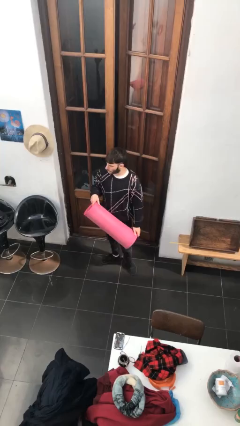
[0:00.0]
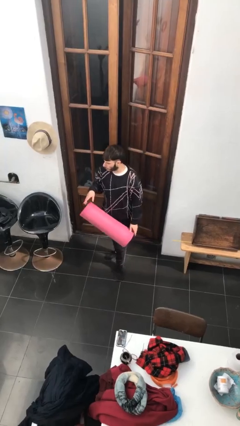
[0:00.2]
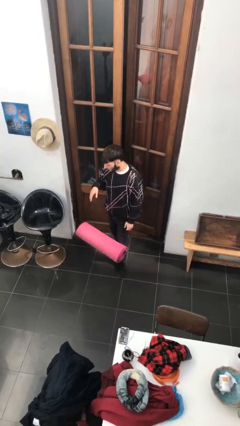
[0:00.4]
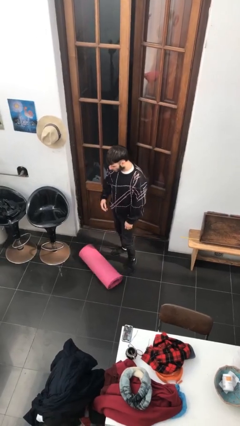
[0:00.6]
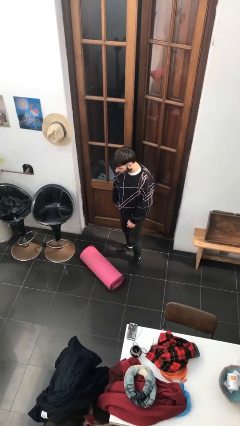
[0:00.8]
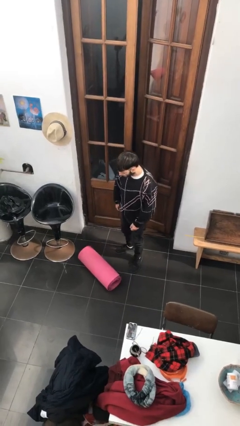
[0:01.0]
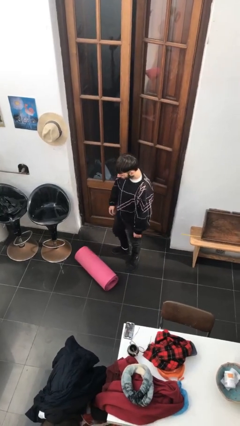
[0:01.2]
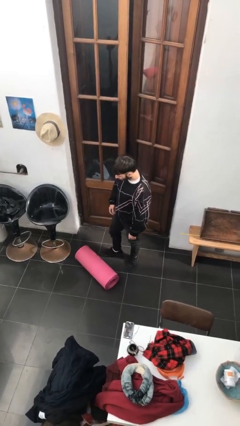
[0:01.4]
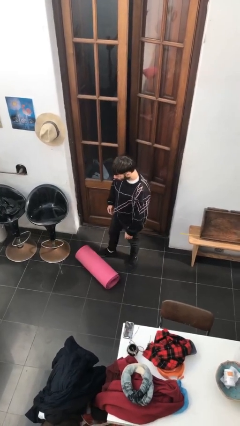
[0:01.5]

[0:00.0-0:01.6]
person drops object

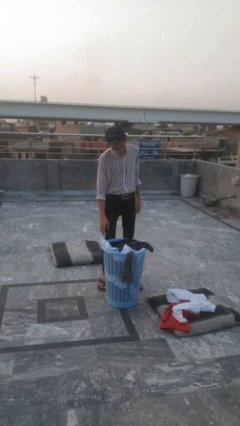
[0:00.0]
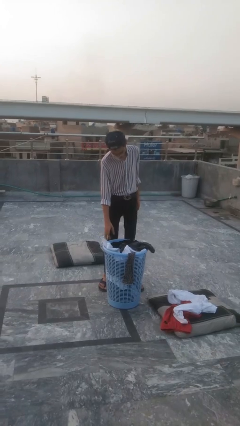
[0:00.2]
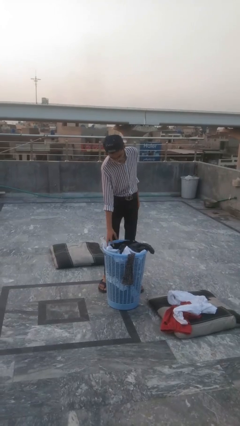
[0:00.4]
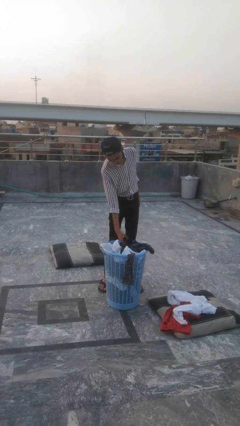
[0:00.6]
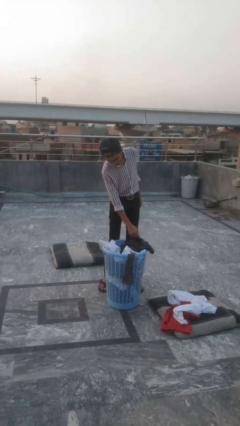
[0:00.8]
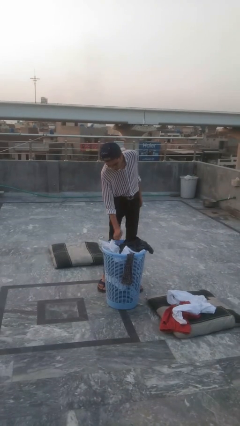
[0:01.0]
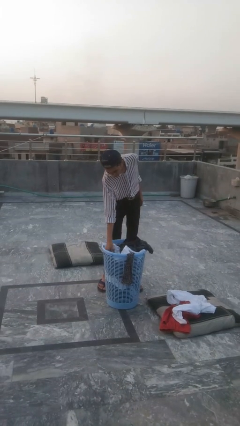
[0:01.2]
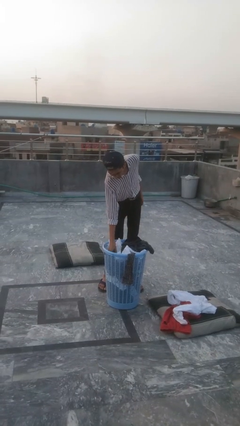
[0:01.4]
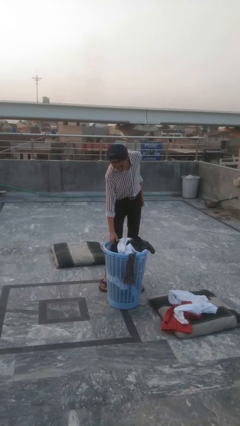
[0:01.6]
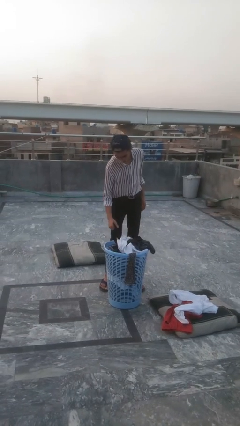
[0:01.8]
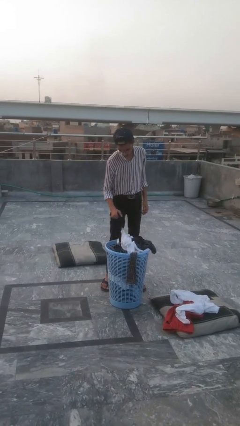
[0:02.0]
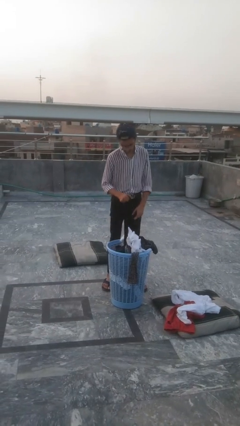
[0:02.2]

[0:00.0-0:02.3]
person puts object into basket

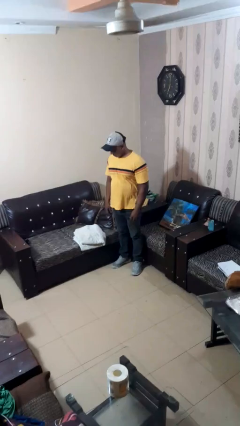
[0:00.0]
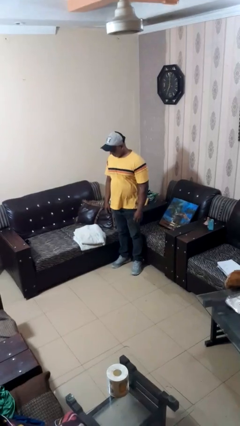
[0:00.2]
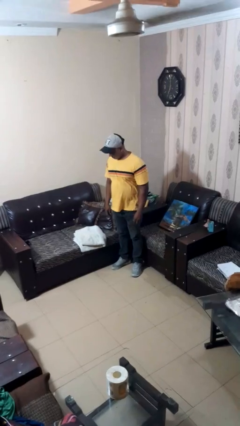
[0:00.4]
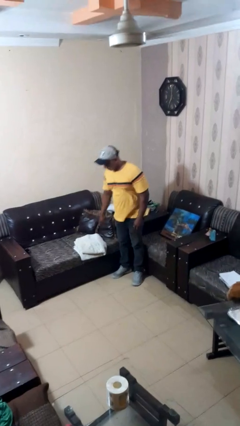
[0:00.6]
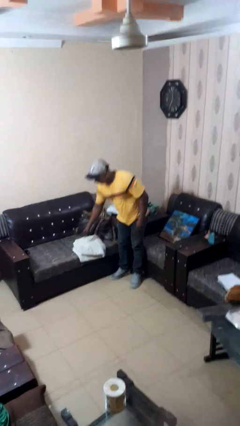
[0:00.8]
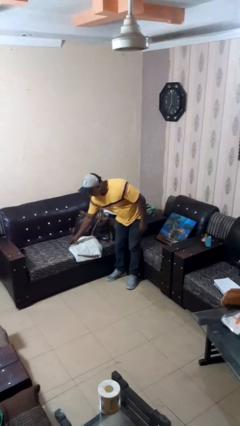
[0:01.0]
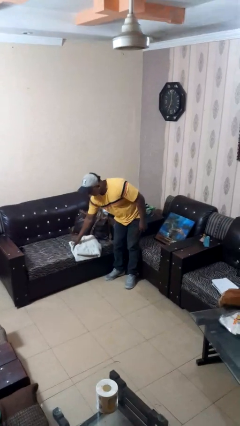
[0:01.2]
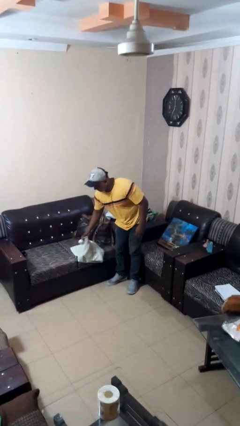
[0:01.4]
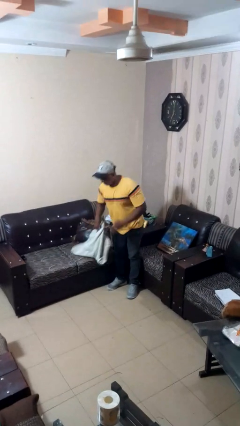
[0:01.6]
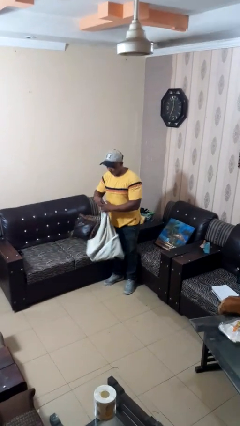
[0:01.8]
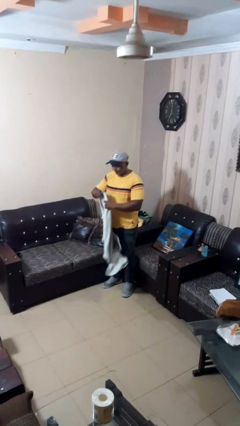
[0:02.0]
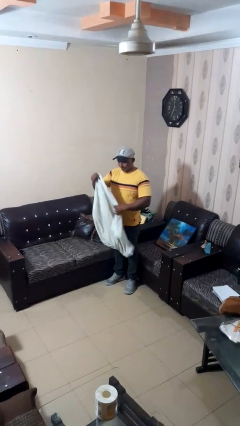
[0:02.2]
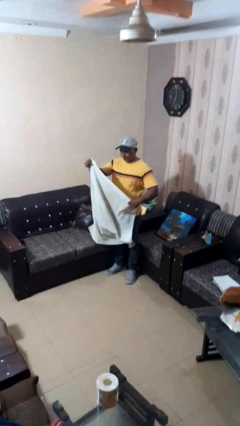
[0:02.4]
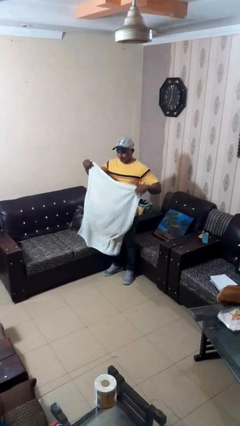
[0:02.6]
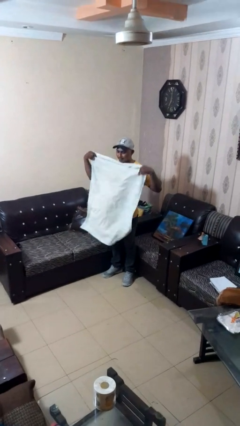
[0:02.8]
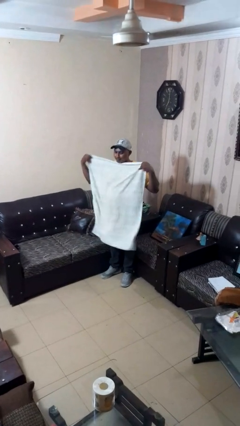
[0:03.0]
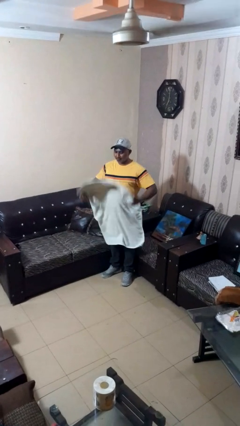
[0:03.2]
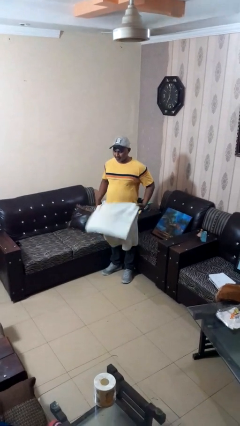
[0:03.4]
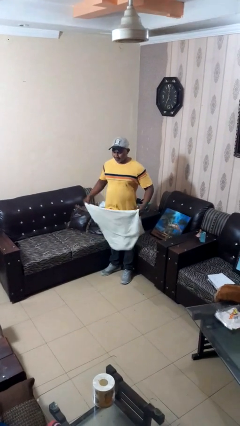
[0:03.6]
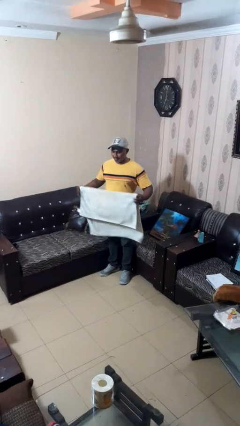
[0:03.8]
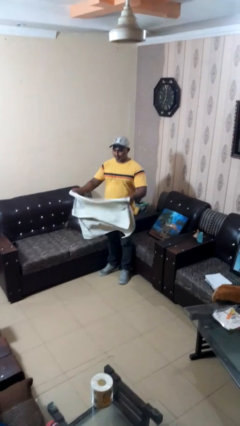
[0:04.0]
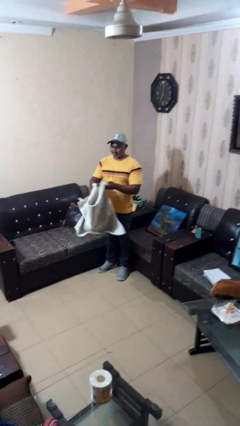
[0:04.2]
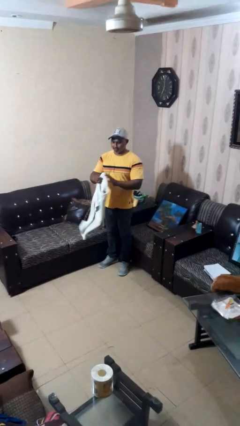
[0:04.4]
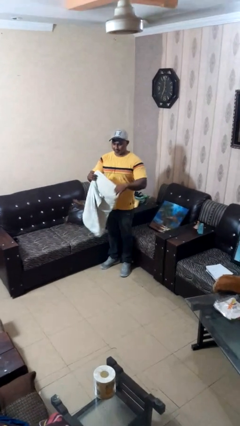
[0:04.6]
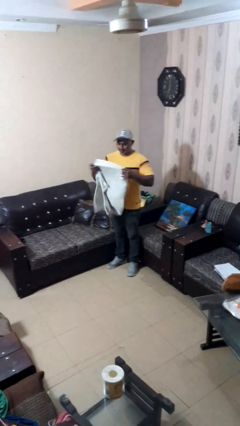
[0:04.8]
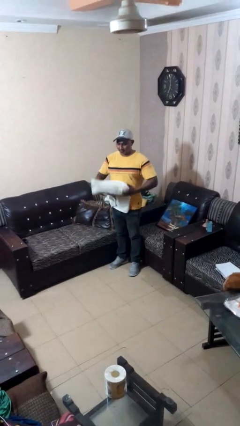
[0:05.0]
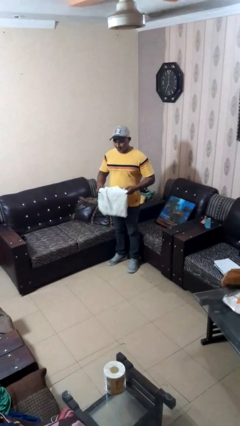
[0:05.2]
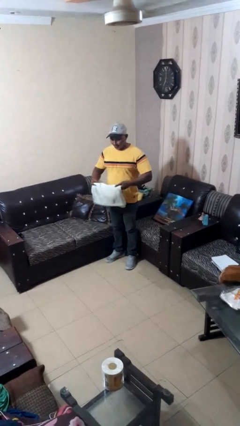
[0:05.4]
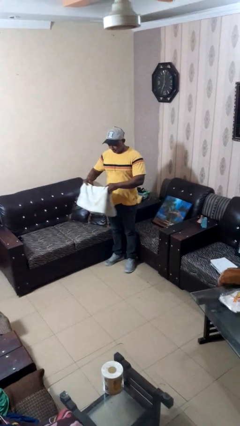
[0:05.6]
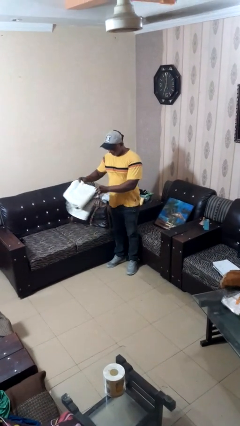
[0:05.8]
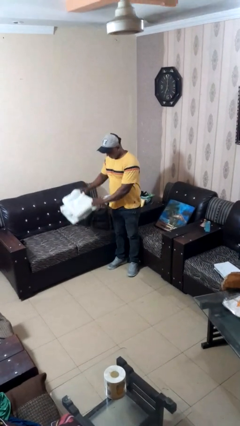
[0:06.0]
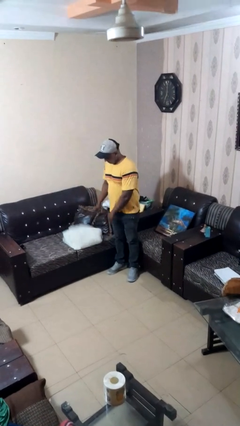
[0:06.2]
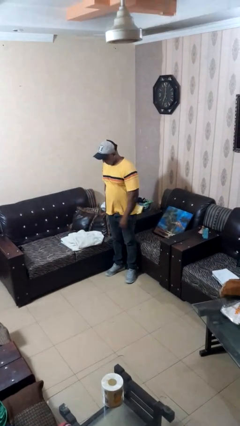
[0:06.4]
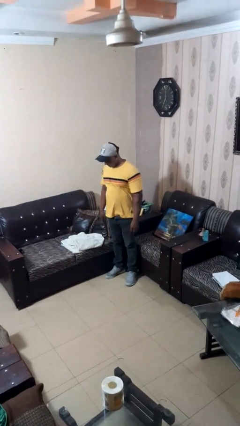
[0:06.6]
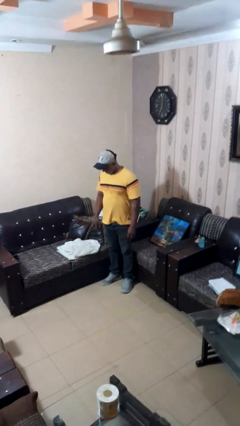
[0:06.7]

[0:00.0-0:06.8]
person folds towel

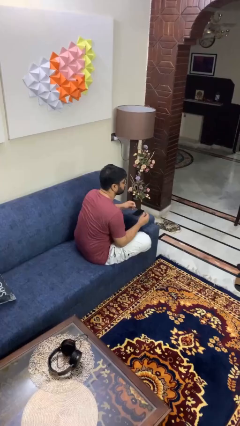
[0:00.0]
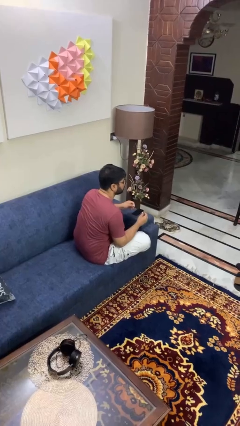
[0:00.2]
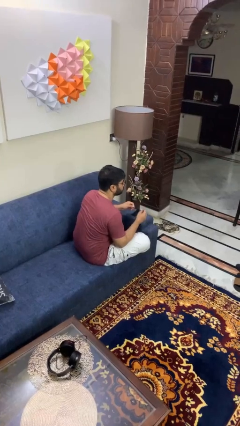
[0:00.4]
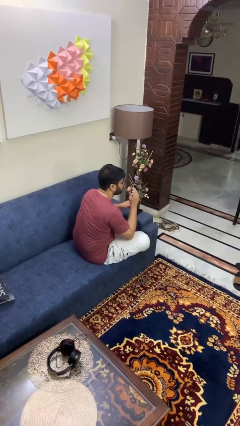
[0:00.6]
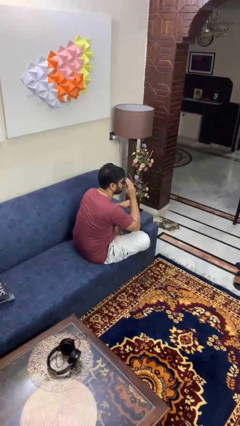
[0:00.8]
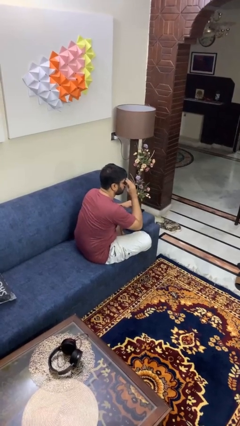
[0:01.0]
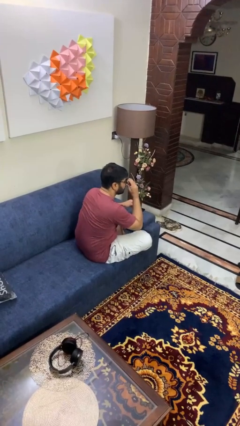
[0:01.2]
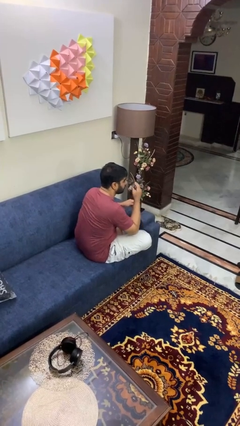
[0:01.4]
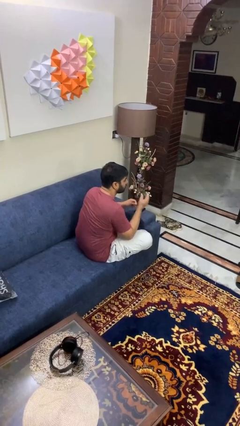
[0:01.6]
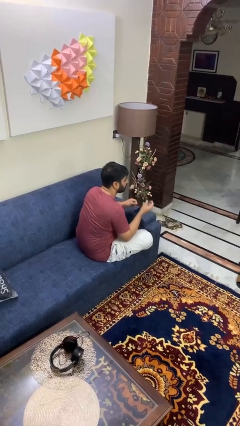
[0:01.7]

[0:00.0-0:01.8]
person takes off glasses

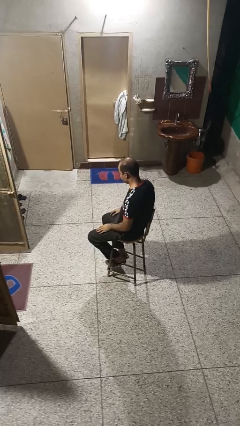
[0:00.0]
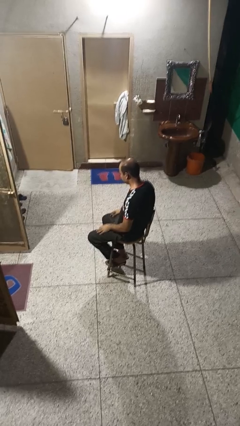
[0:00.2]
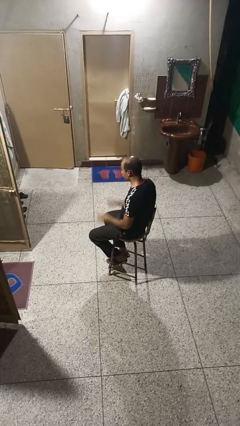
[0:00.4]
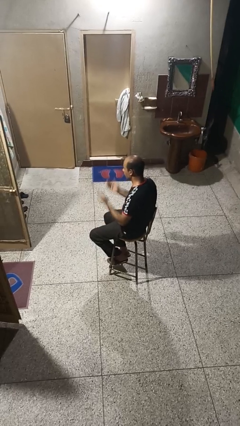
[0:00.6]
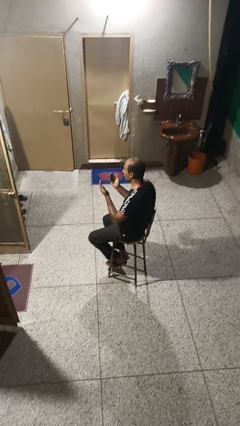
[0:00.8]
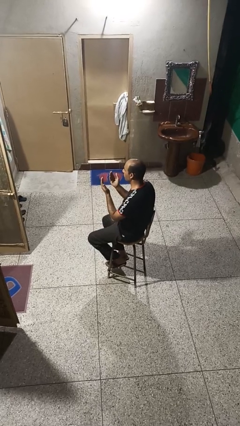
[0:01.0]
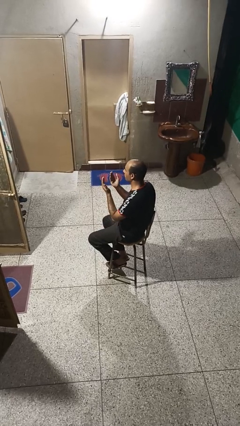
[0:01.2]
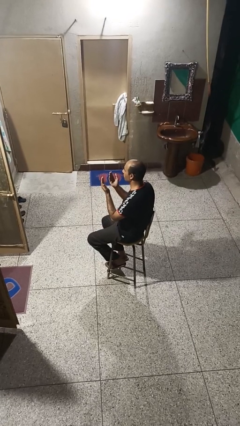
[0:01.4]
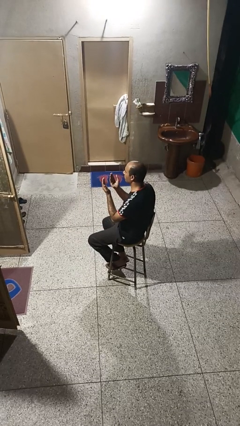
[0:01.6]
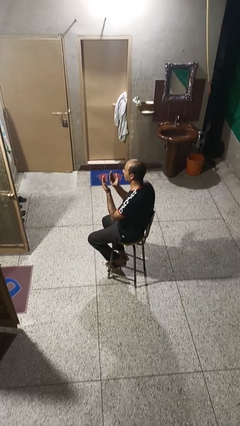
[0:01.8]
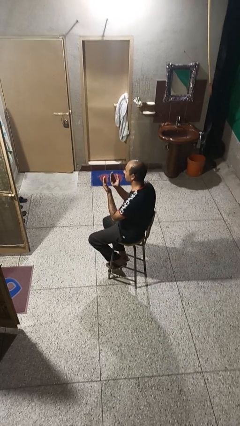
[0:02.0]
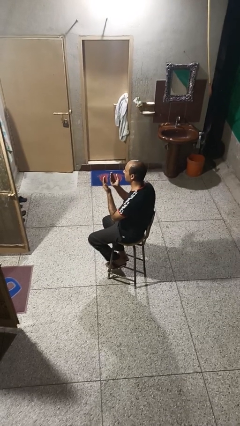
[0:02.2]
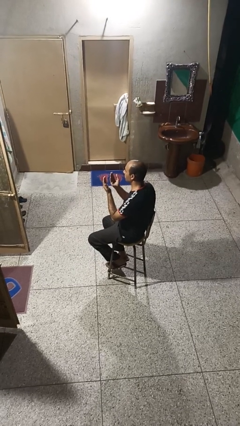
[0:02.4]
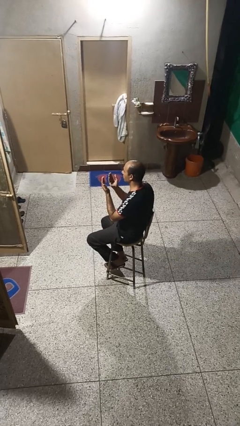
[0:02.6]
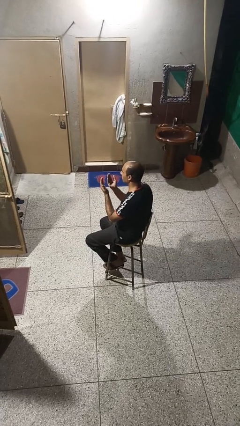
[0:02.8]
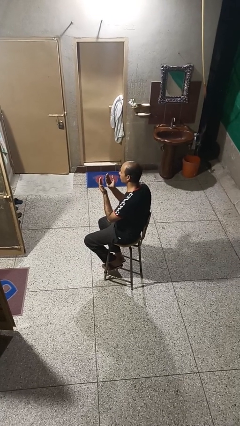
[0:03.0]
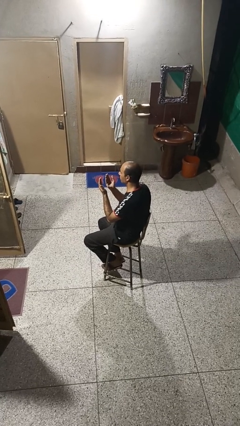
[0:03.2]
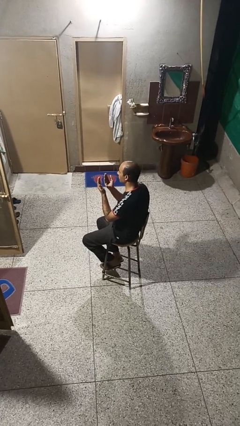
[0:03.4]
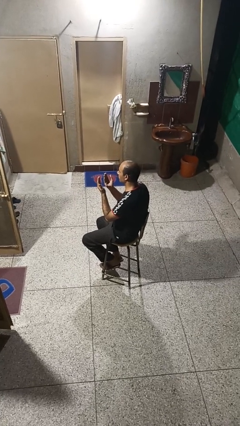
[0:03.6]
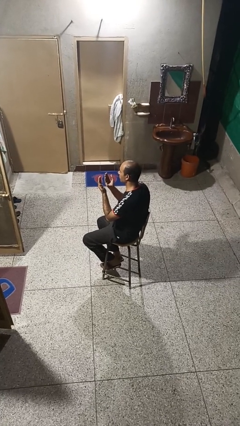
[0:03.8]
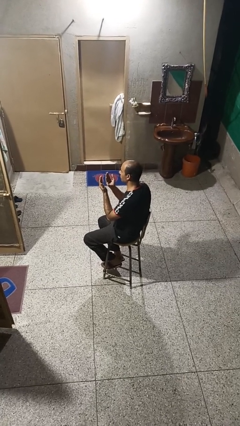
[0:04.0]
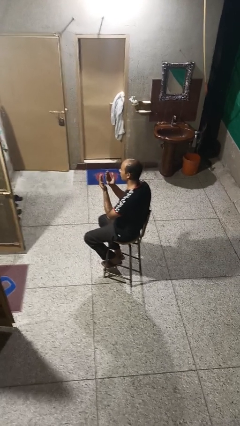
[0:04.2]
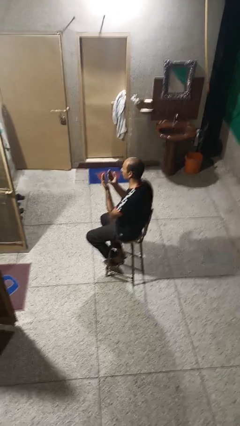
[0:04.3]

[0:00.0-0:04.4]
person prays

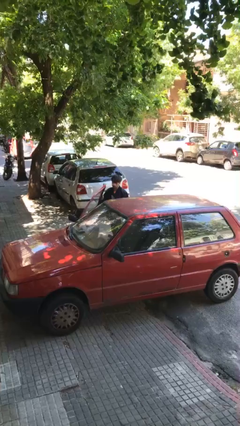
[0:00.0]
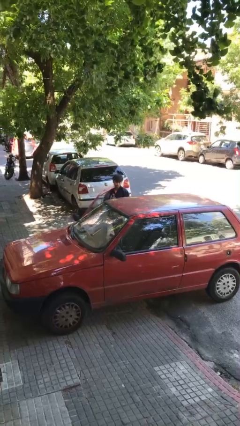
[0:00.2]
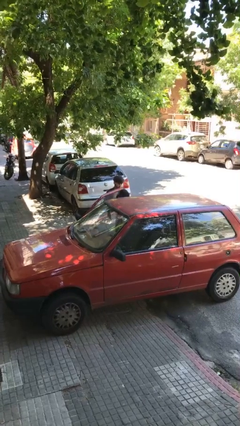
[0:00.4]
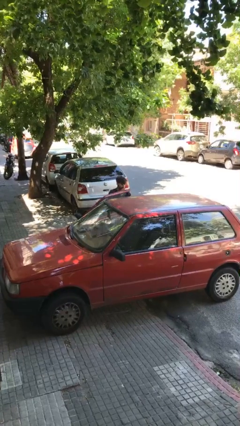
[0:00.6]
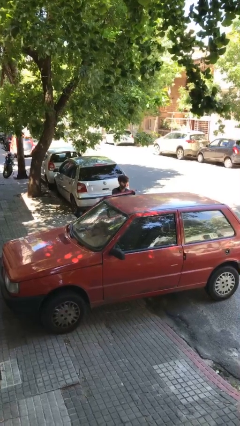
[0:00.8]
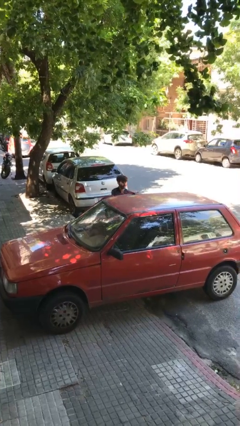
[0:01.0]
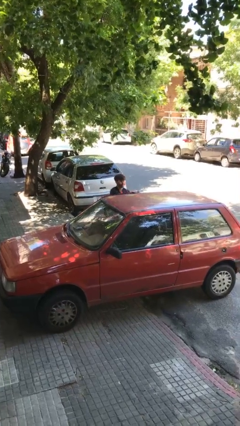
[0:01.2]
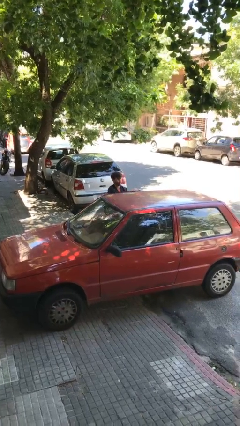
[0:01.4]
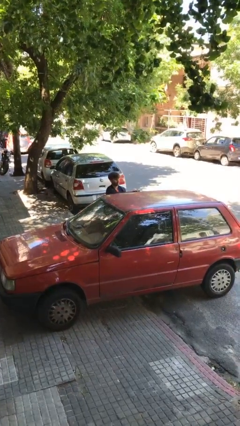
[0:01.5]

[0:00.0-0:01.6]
person closes car door
